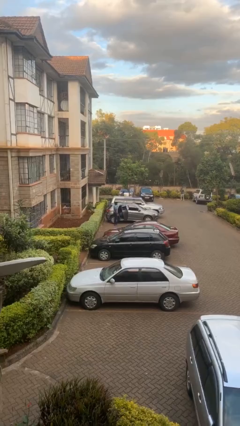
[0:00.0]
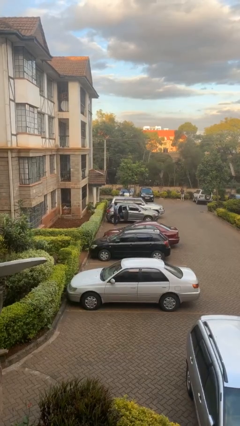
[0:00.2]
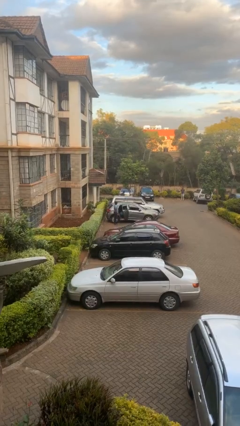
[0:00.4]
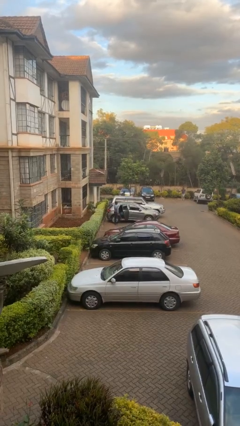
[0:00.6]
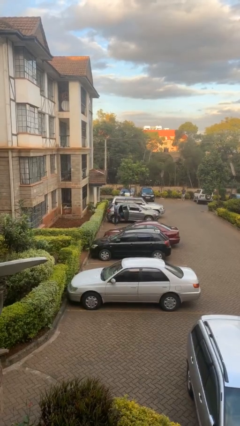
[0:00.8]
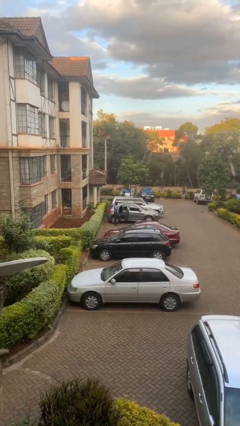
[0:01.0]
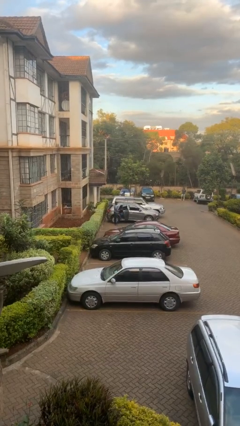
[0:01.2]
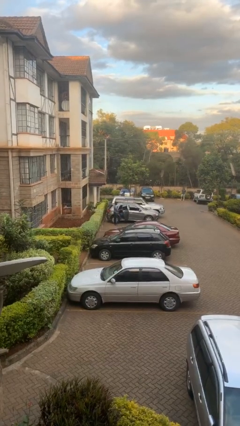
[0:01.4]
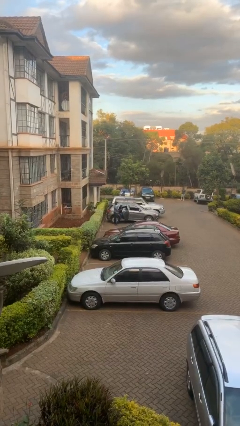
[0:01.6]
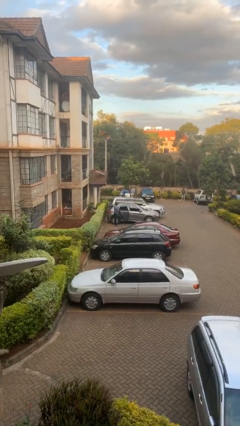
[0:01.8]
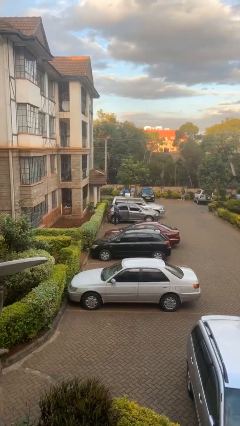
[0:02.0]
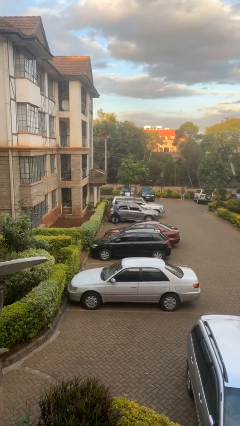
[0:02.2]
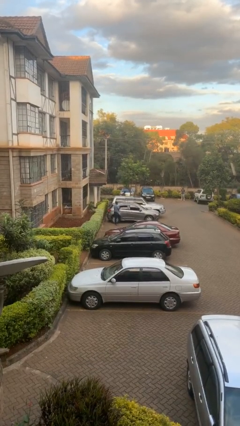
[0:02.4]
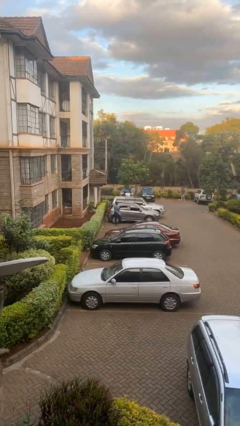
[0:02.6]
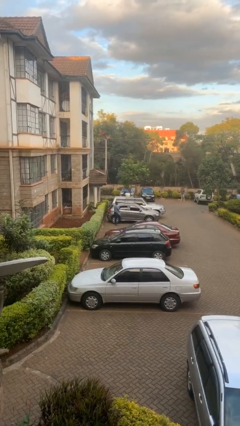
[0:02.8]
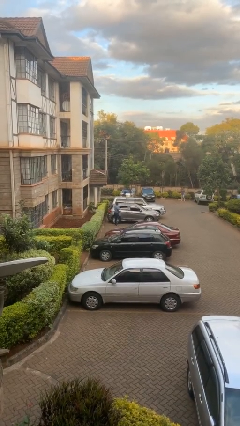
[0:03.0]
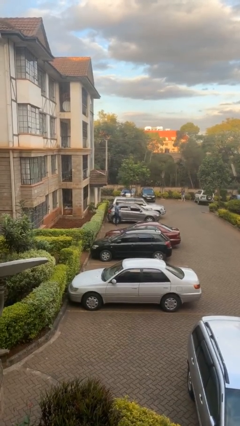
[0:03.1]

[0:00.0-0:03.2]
person closes car door

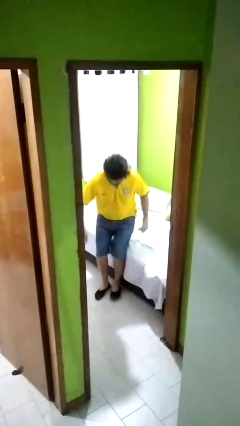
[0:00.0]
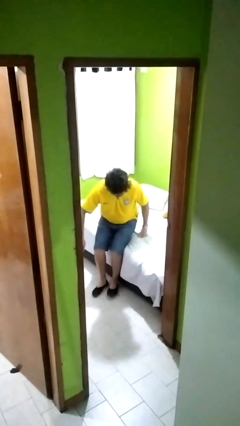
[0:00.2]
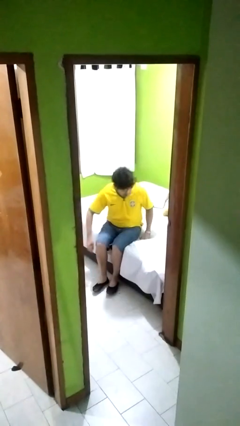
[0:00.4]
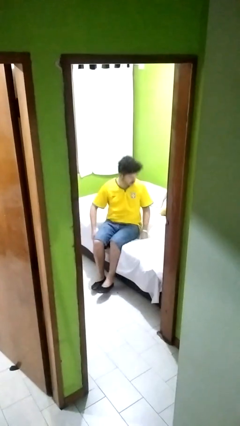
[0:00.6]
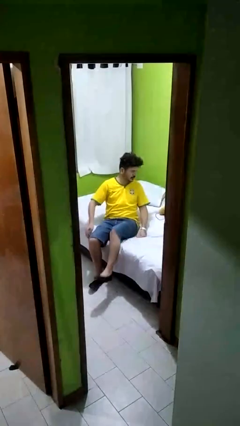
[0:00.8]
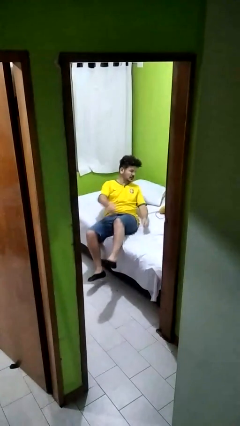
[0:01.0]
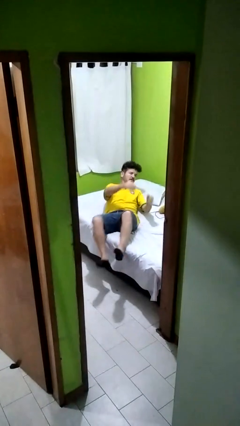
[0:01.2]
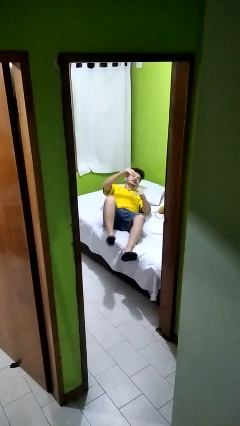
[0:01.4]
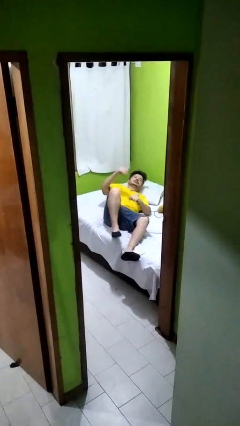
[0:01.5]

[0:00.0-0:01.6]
person lies down on bed

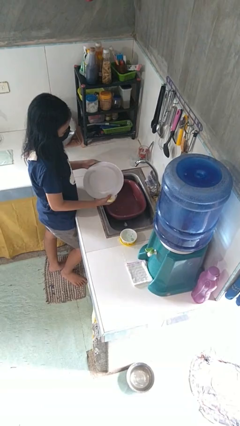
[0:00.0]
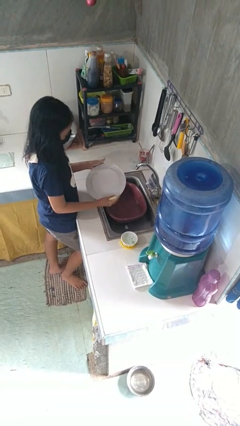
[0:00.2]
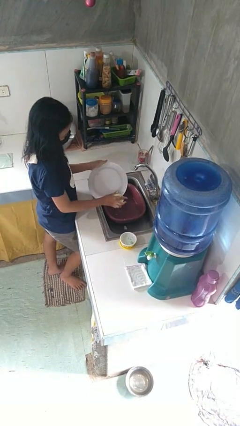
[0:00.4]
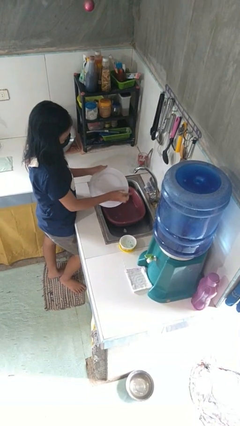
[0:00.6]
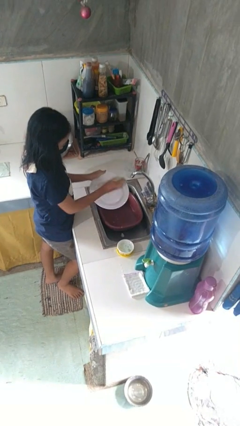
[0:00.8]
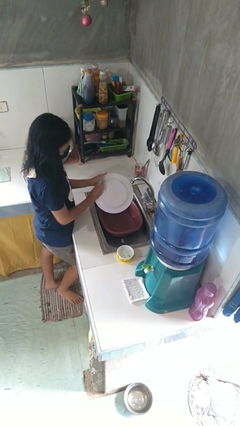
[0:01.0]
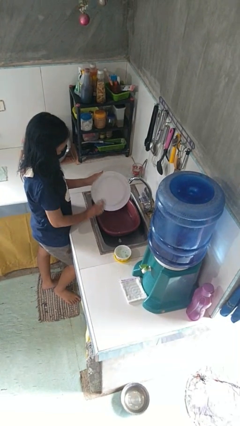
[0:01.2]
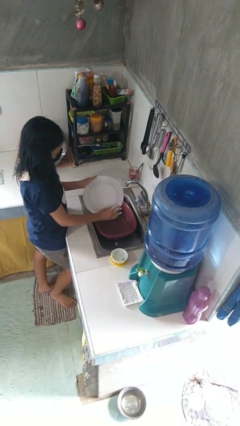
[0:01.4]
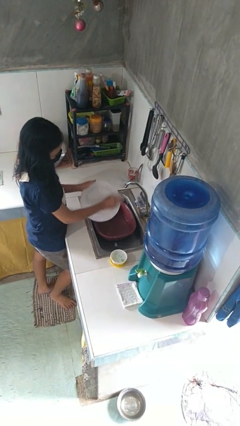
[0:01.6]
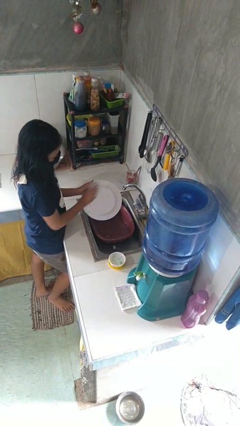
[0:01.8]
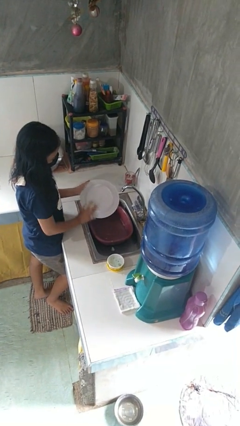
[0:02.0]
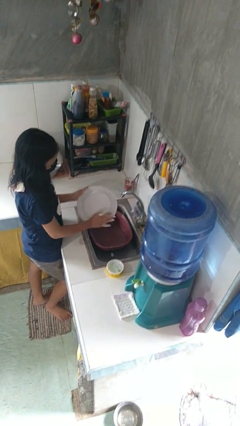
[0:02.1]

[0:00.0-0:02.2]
person washes dish

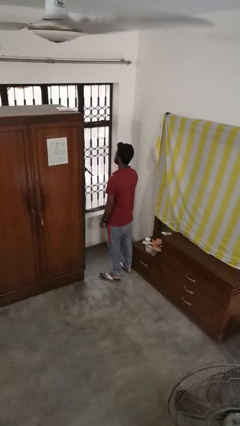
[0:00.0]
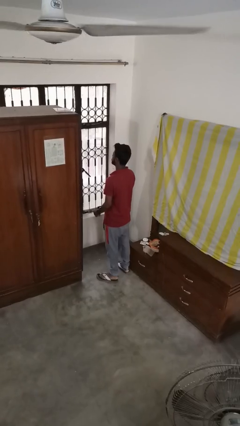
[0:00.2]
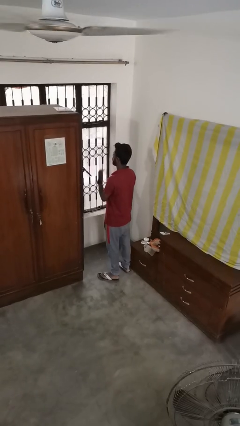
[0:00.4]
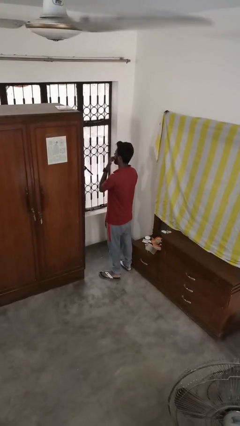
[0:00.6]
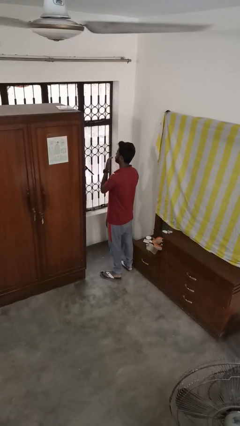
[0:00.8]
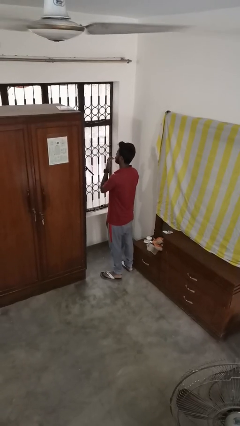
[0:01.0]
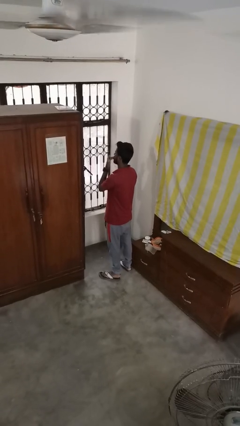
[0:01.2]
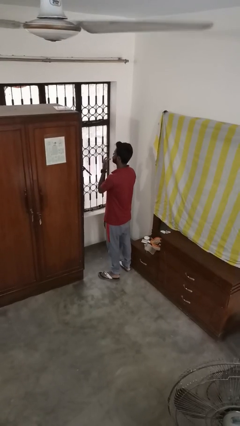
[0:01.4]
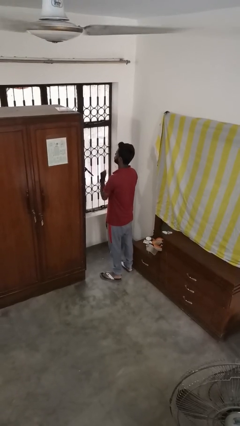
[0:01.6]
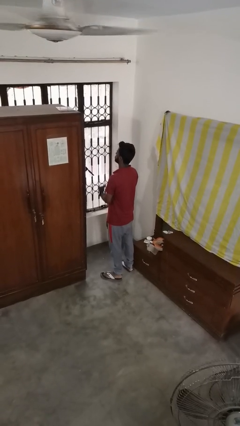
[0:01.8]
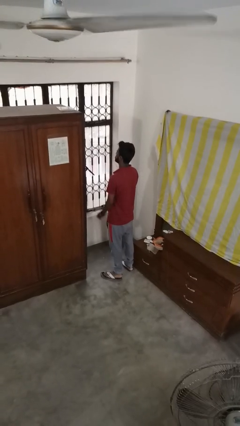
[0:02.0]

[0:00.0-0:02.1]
person licks fingers

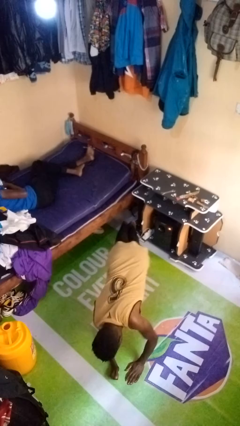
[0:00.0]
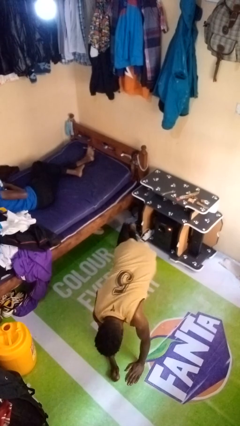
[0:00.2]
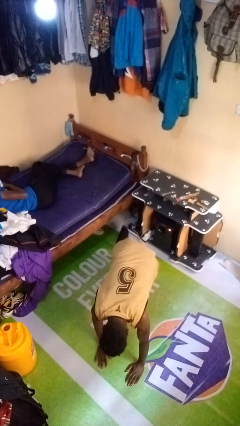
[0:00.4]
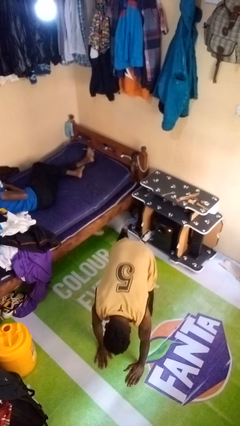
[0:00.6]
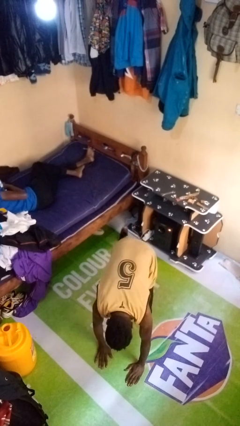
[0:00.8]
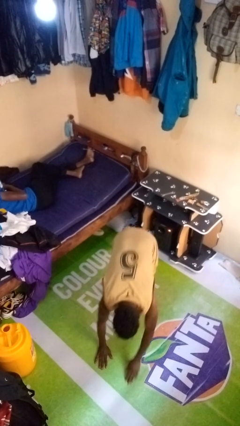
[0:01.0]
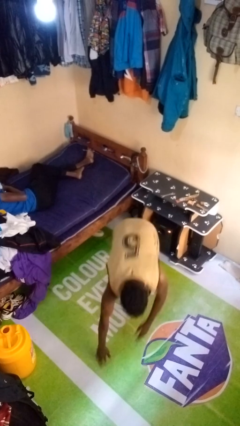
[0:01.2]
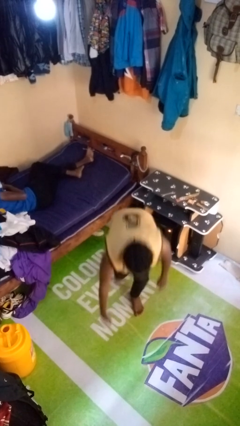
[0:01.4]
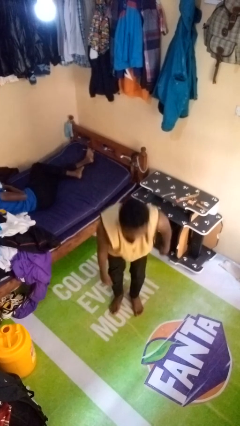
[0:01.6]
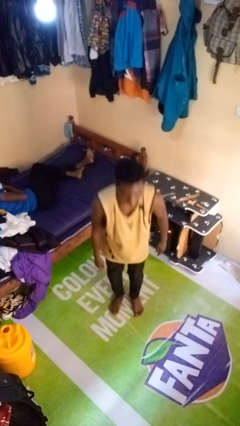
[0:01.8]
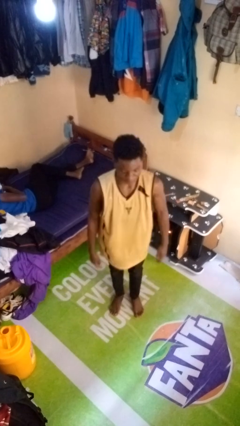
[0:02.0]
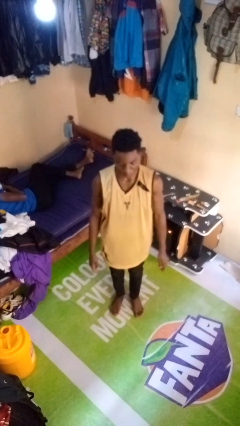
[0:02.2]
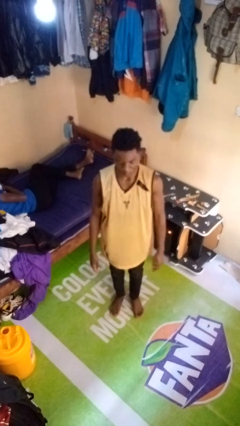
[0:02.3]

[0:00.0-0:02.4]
person stands up from floor

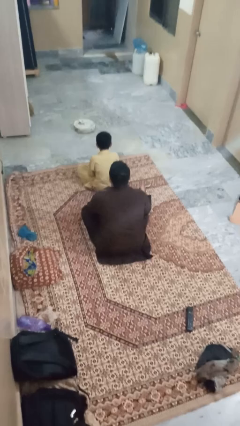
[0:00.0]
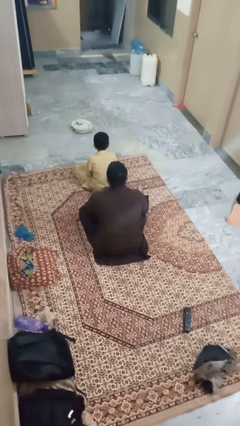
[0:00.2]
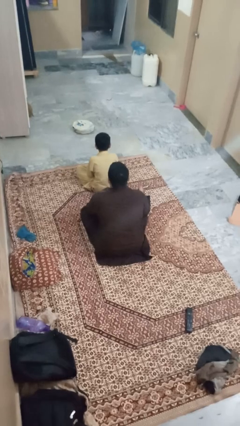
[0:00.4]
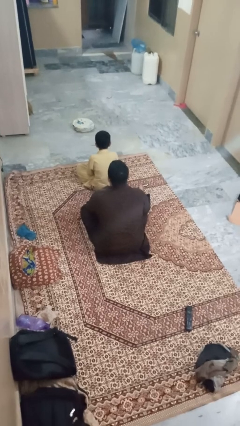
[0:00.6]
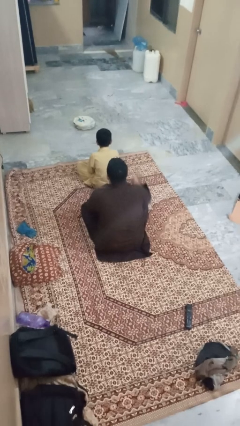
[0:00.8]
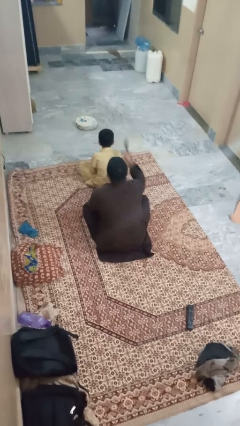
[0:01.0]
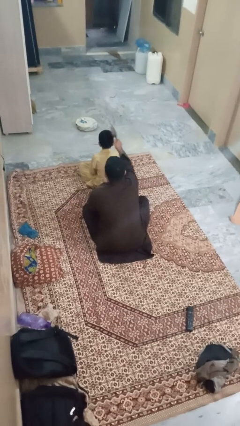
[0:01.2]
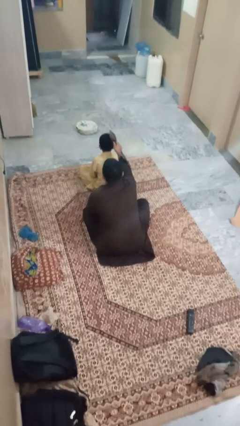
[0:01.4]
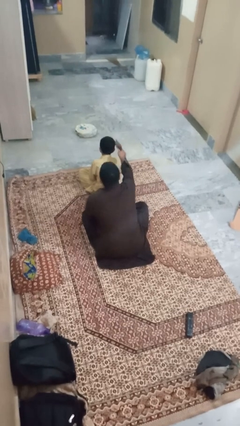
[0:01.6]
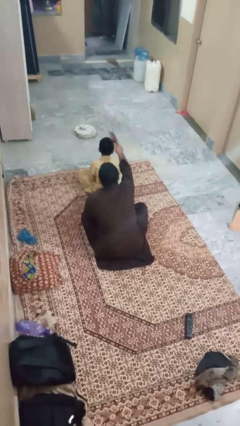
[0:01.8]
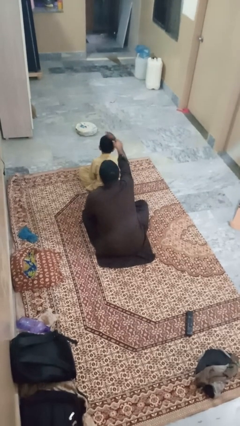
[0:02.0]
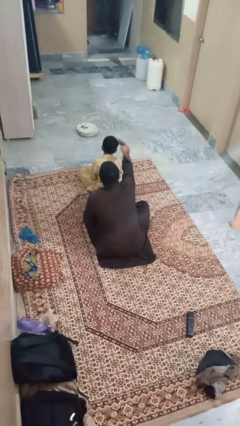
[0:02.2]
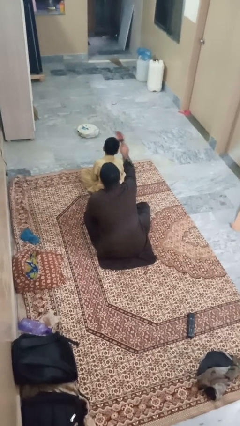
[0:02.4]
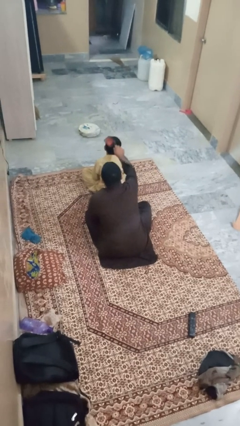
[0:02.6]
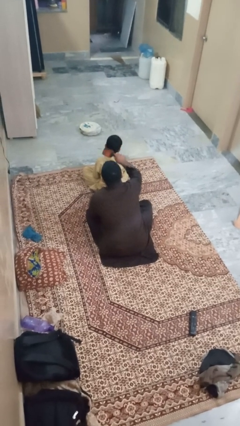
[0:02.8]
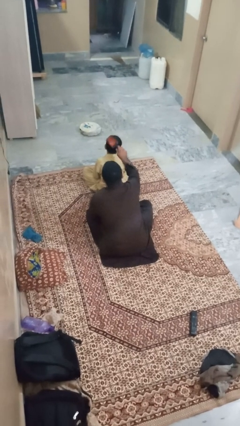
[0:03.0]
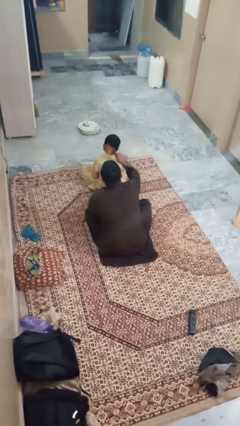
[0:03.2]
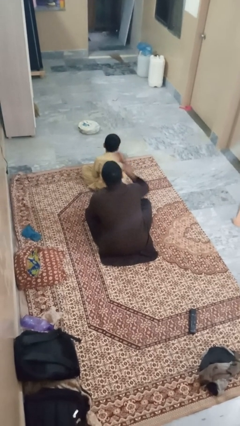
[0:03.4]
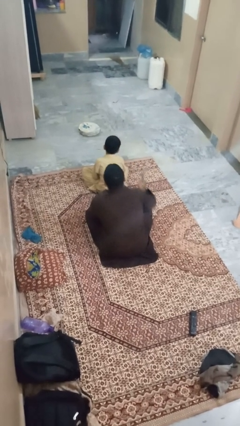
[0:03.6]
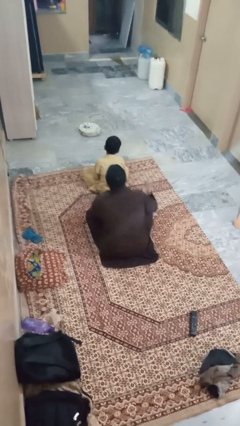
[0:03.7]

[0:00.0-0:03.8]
person brushes hair of person

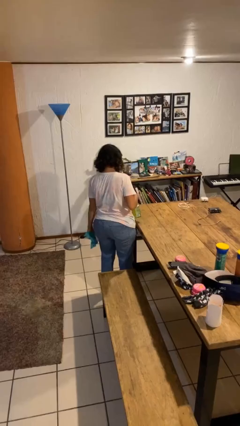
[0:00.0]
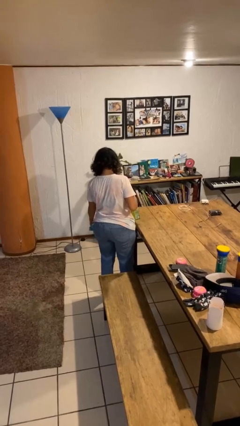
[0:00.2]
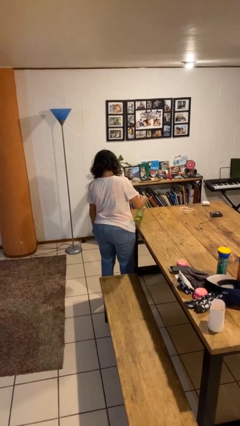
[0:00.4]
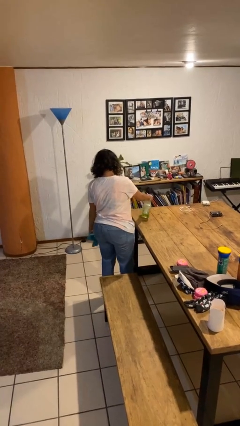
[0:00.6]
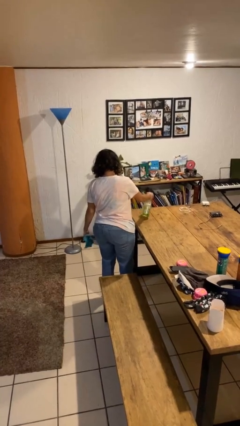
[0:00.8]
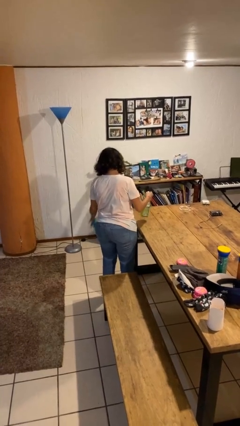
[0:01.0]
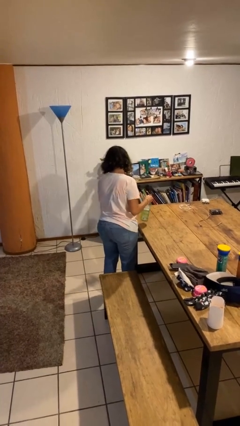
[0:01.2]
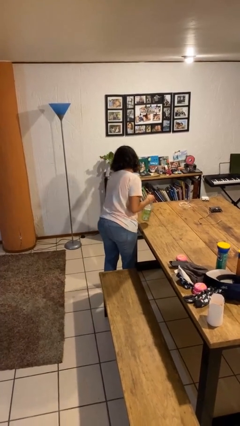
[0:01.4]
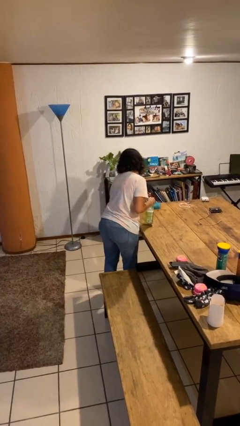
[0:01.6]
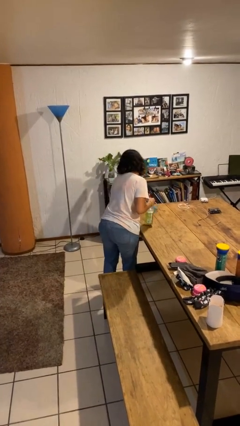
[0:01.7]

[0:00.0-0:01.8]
person sprays from bottle
